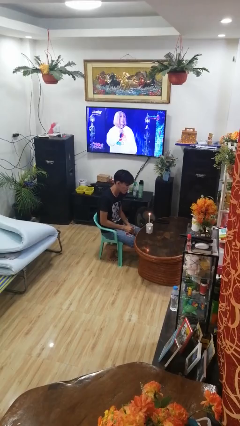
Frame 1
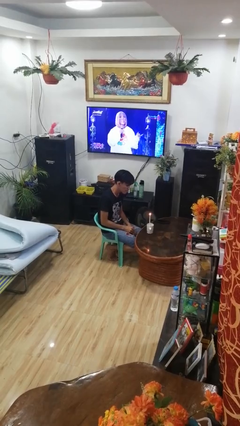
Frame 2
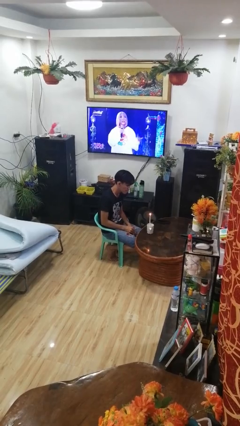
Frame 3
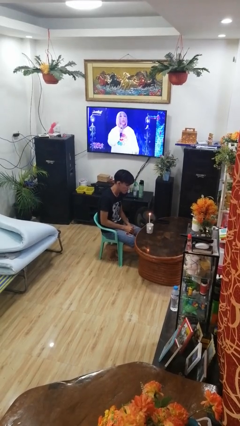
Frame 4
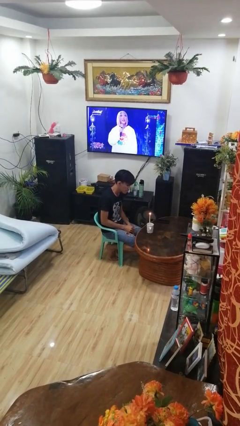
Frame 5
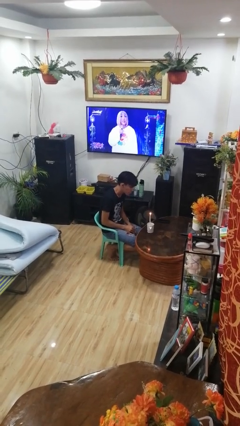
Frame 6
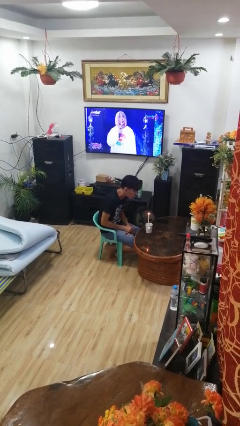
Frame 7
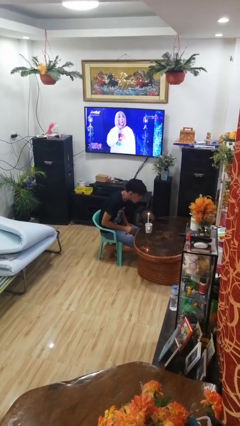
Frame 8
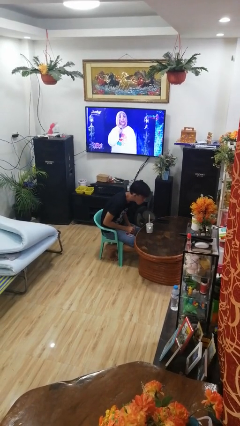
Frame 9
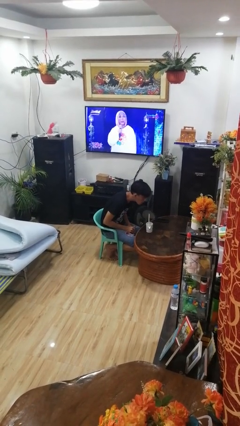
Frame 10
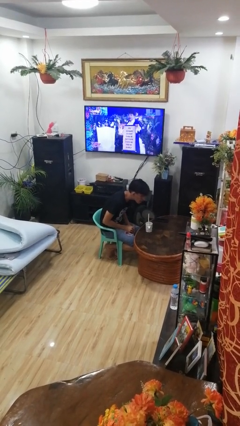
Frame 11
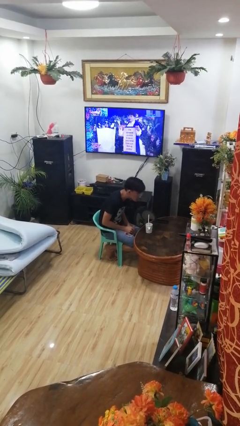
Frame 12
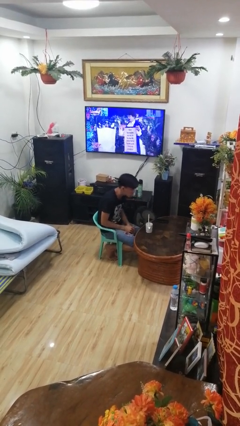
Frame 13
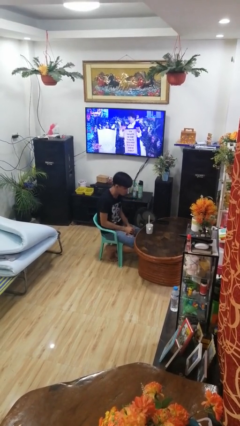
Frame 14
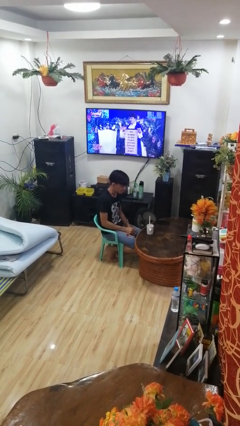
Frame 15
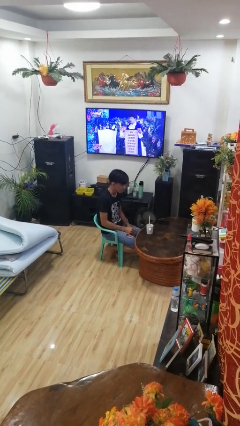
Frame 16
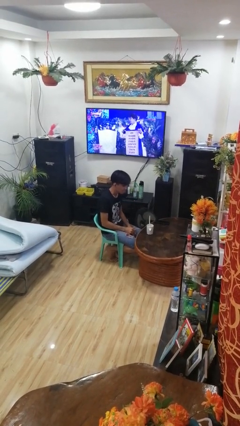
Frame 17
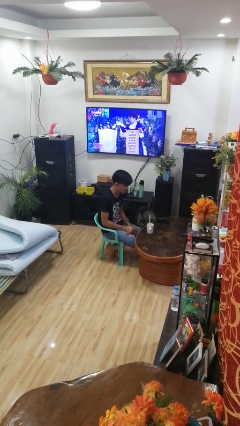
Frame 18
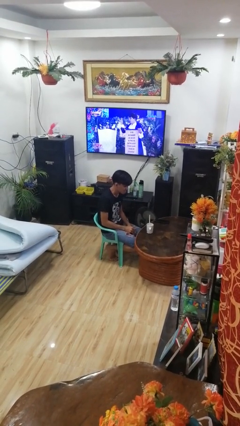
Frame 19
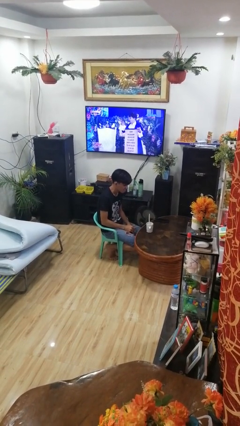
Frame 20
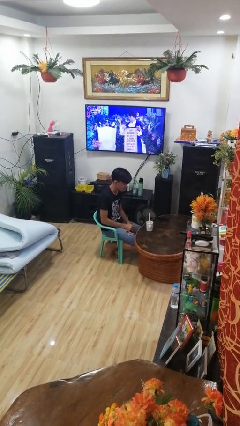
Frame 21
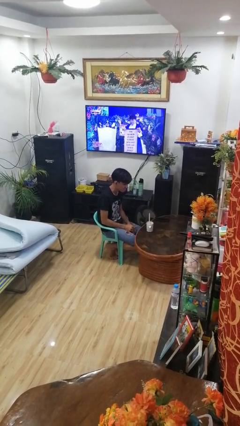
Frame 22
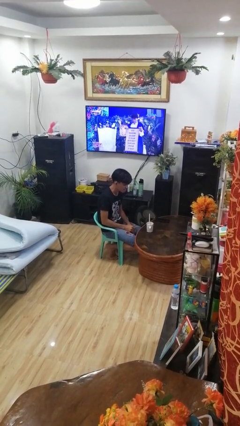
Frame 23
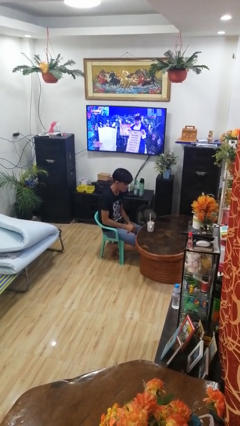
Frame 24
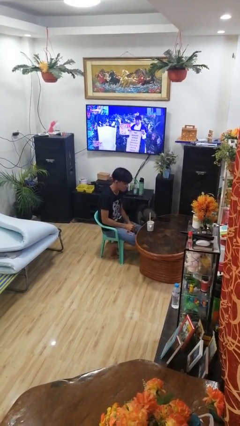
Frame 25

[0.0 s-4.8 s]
person extinguishes candle

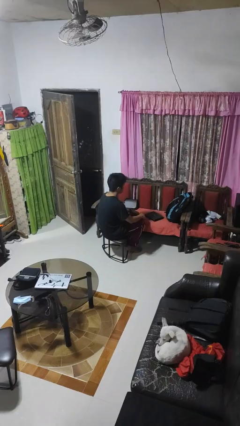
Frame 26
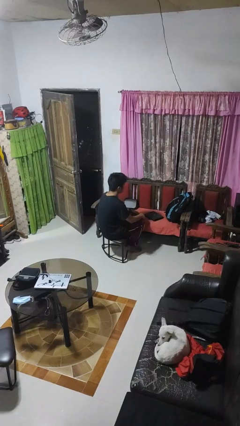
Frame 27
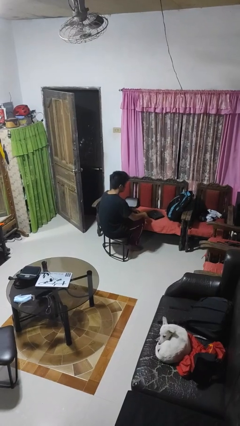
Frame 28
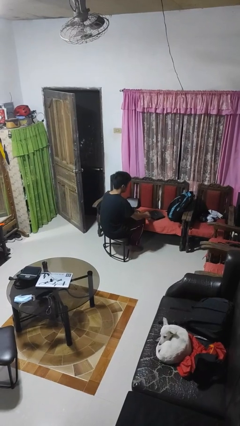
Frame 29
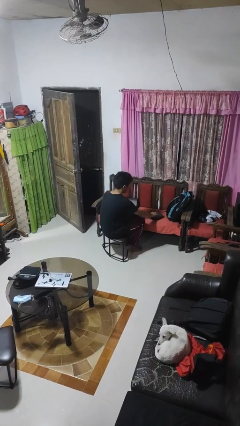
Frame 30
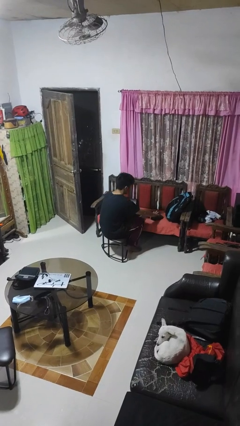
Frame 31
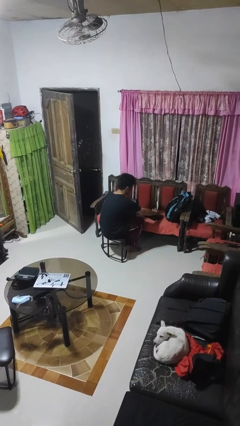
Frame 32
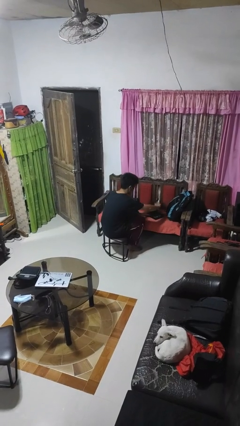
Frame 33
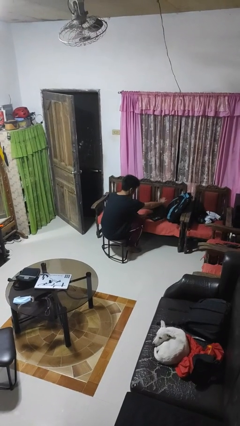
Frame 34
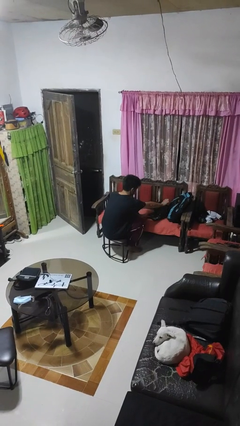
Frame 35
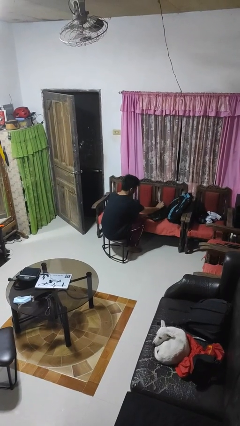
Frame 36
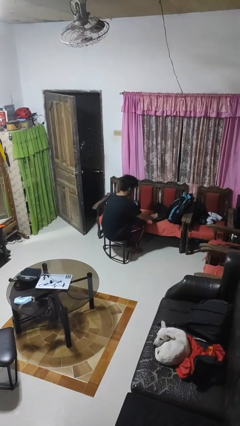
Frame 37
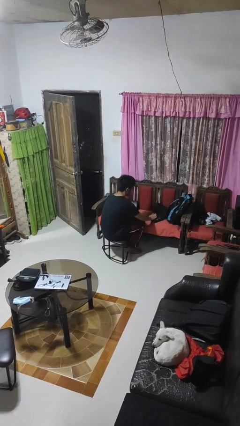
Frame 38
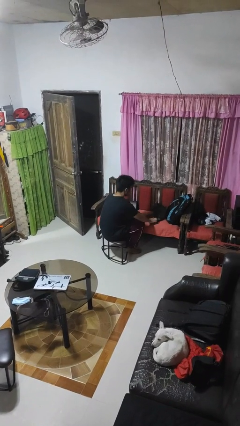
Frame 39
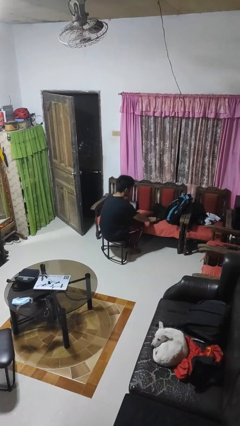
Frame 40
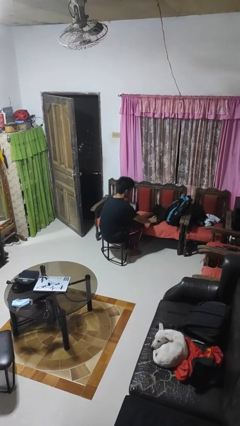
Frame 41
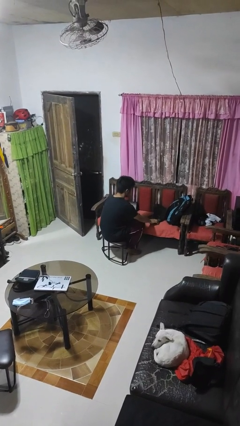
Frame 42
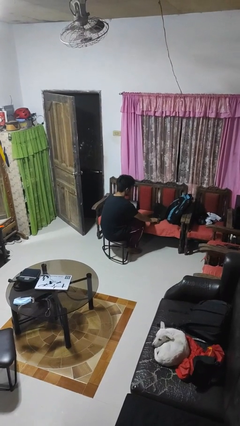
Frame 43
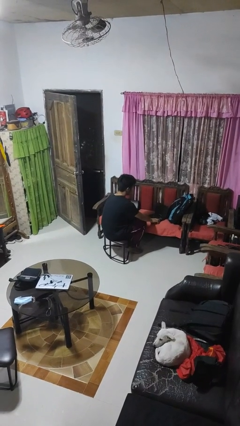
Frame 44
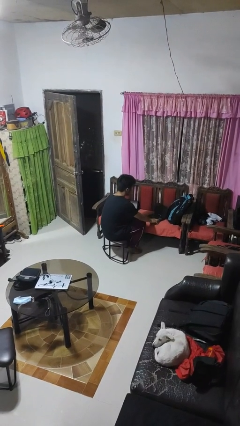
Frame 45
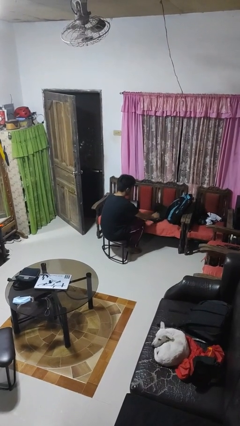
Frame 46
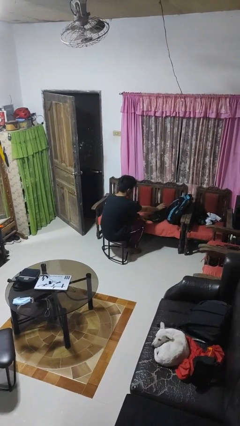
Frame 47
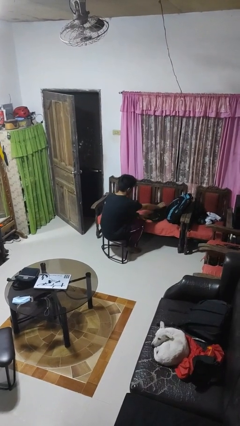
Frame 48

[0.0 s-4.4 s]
person opens laptop

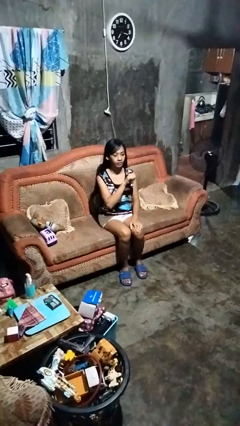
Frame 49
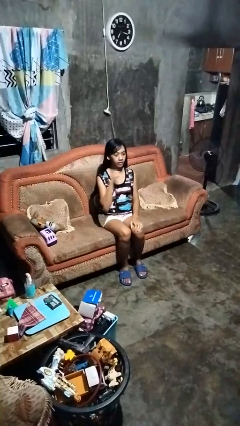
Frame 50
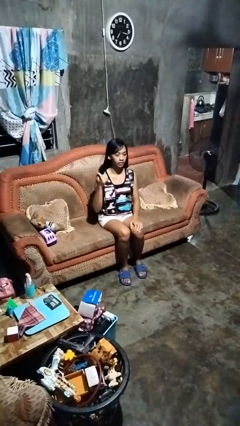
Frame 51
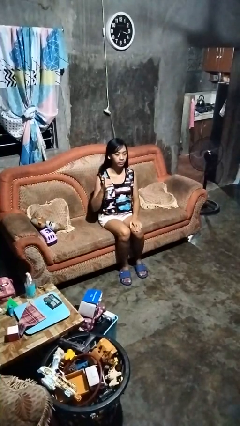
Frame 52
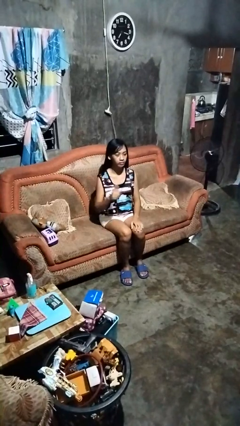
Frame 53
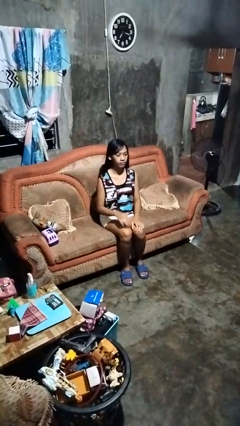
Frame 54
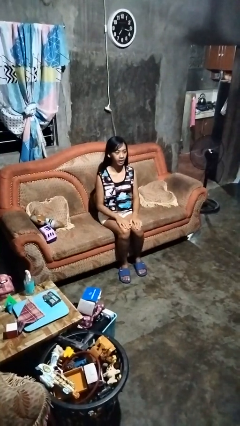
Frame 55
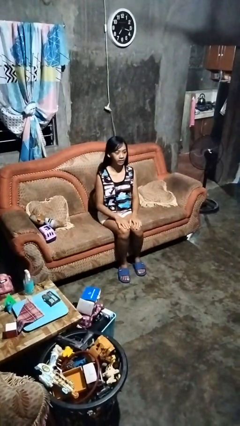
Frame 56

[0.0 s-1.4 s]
person pats head

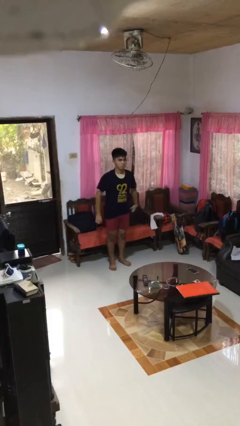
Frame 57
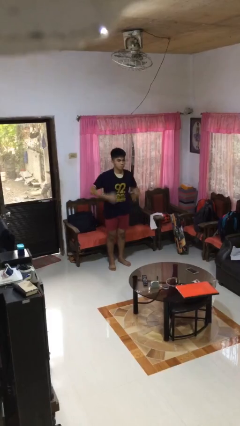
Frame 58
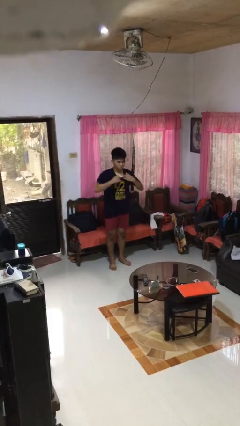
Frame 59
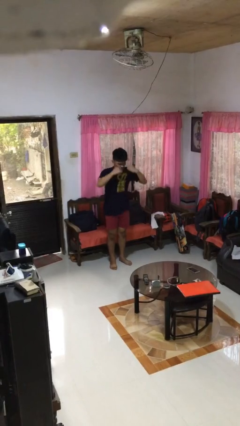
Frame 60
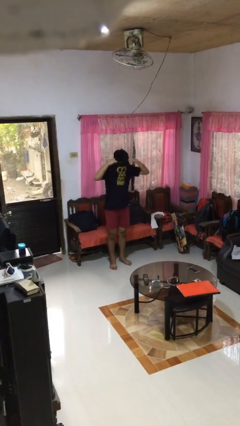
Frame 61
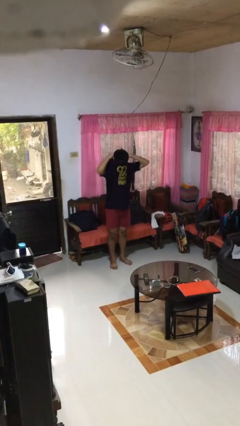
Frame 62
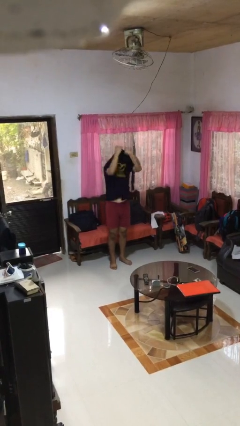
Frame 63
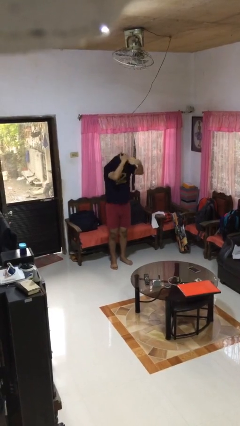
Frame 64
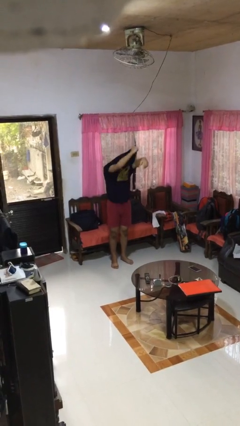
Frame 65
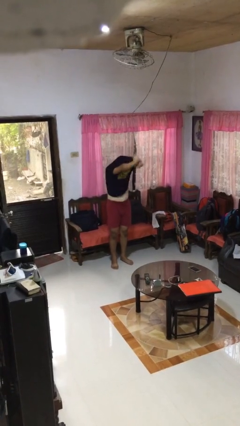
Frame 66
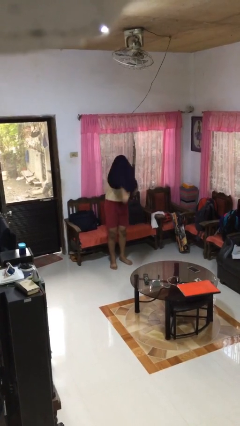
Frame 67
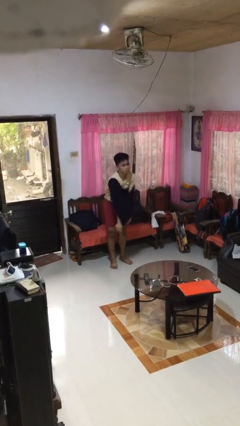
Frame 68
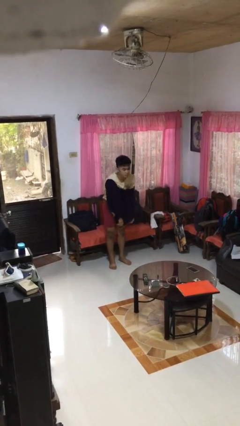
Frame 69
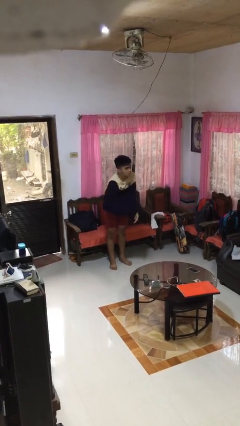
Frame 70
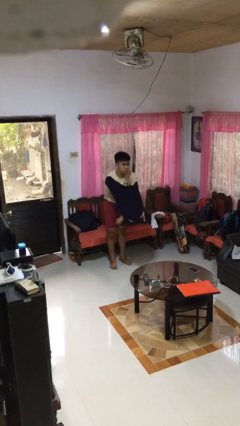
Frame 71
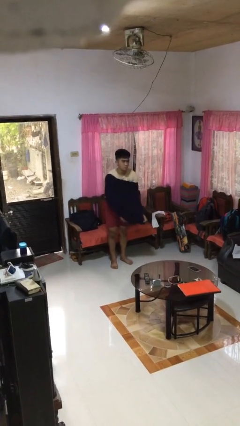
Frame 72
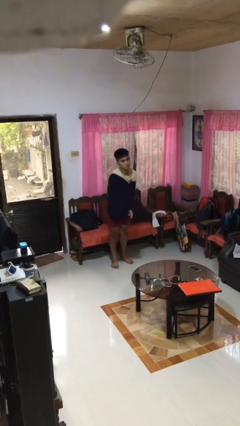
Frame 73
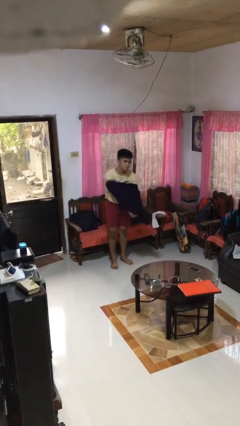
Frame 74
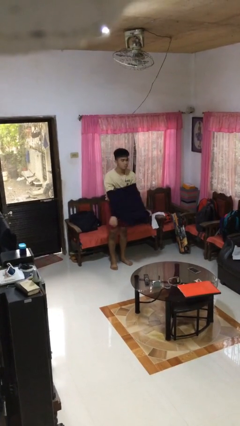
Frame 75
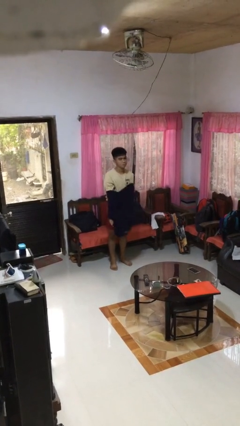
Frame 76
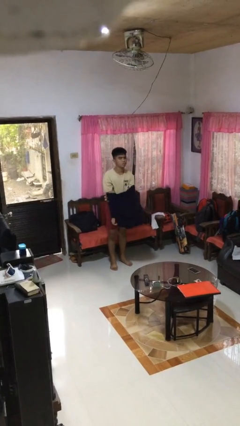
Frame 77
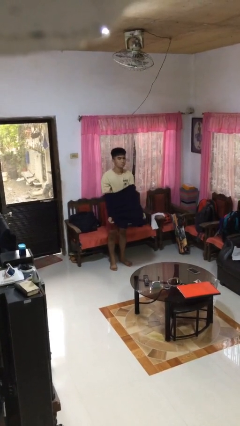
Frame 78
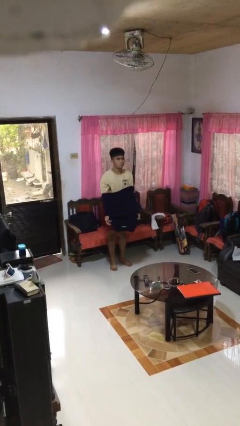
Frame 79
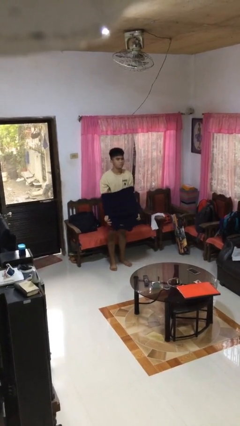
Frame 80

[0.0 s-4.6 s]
person takes off shirt

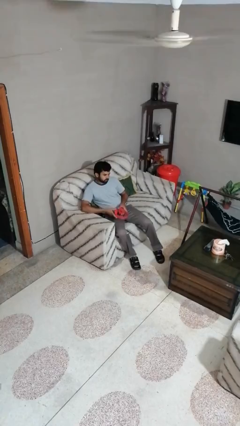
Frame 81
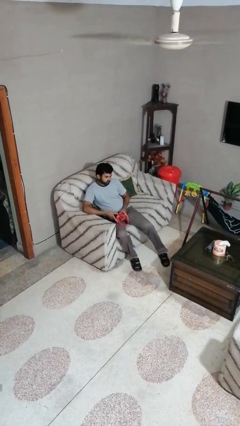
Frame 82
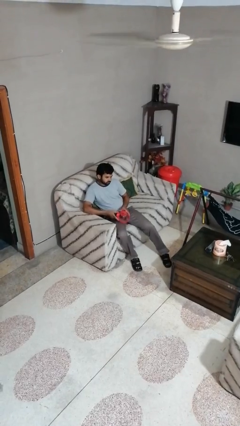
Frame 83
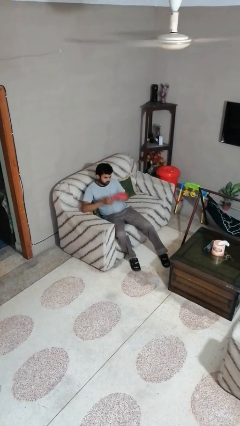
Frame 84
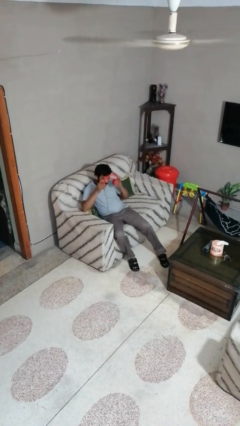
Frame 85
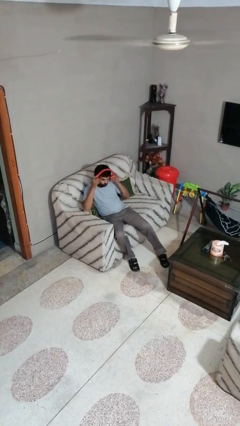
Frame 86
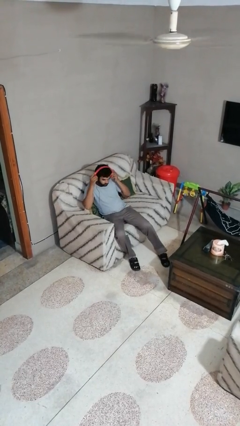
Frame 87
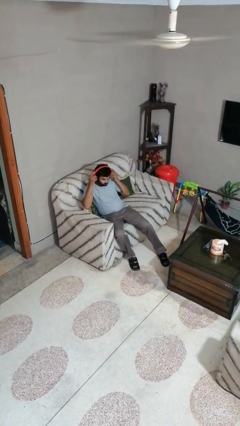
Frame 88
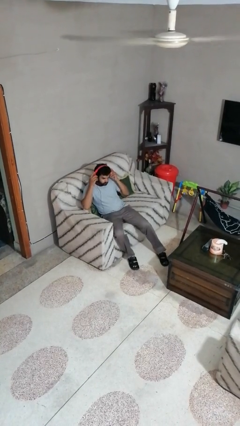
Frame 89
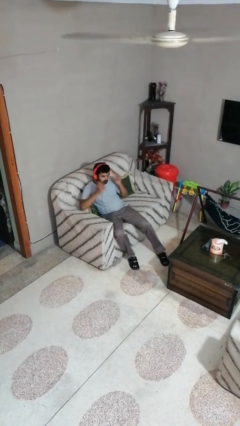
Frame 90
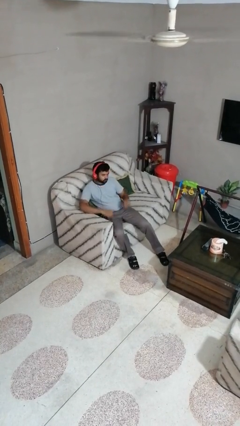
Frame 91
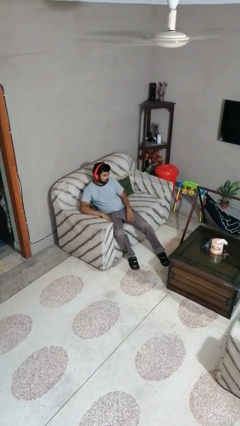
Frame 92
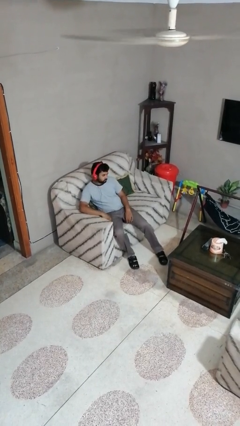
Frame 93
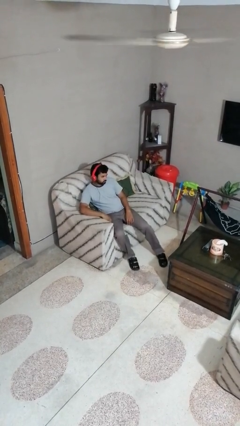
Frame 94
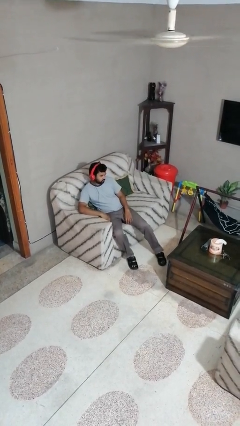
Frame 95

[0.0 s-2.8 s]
person puts on headphones
